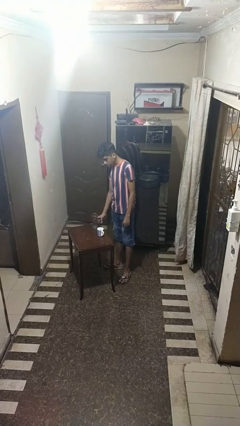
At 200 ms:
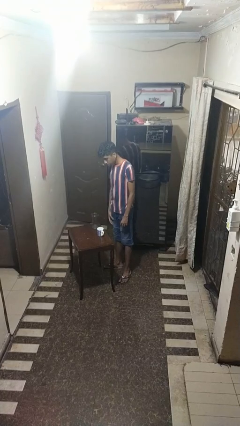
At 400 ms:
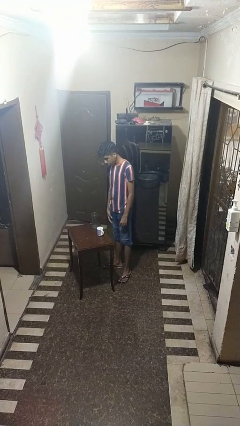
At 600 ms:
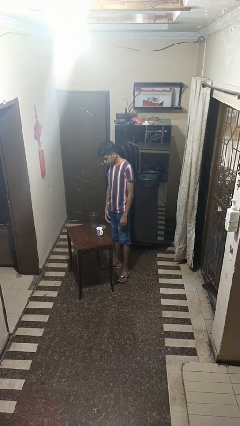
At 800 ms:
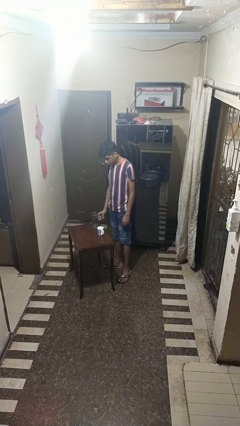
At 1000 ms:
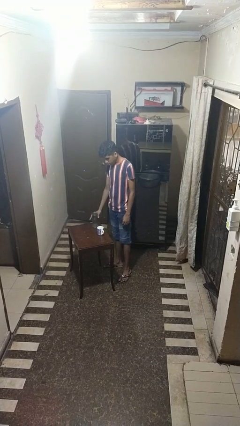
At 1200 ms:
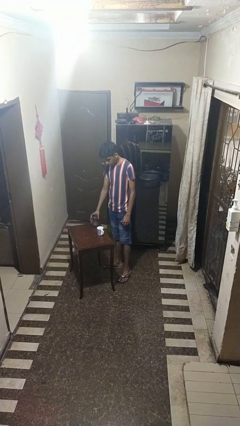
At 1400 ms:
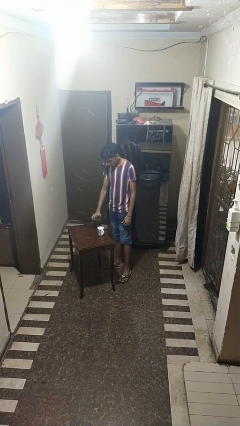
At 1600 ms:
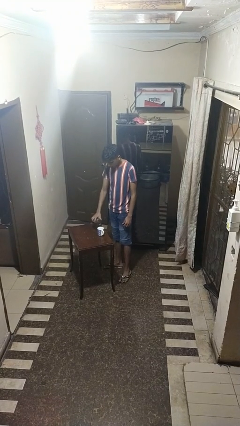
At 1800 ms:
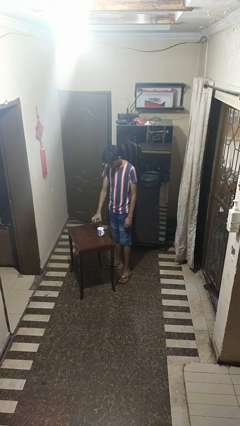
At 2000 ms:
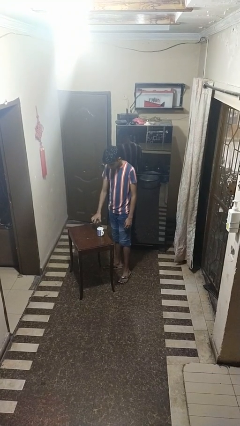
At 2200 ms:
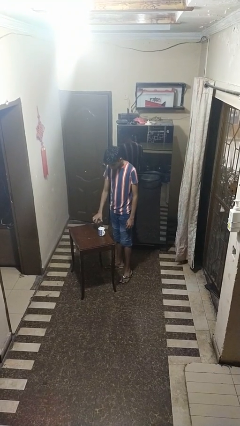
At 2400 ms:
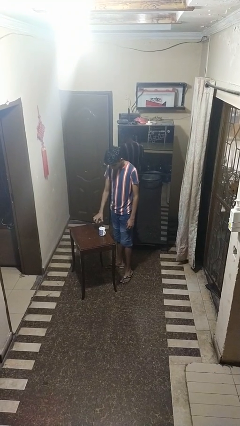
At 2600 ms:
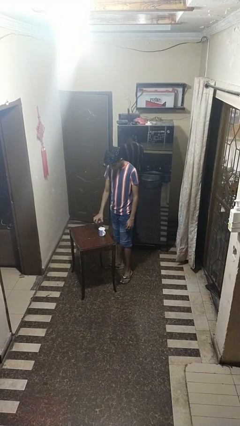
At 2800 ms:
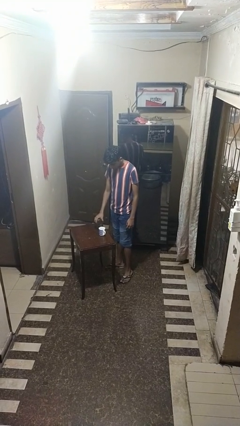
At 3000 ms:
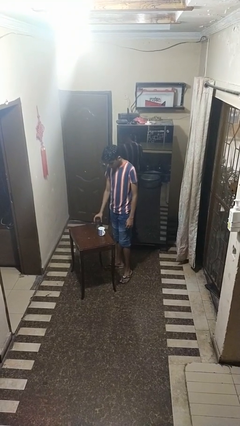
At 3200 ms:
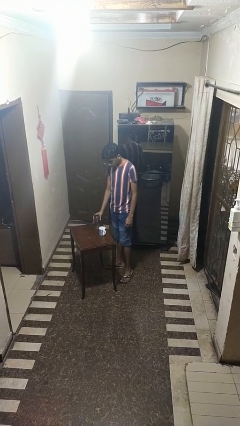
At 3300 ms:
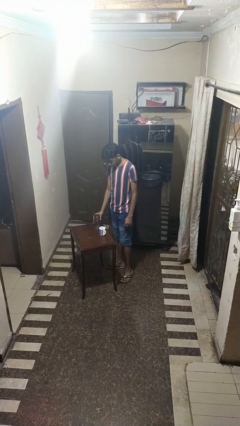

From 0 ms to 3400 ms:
person pours liquid into cup

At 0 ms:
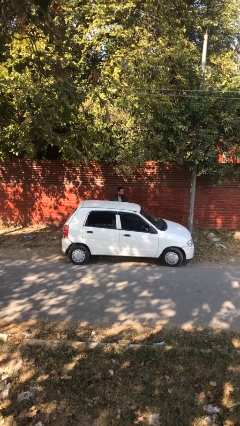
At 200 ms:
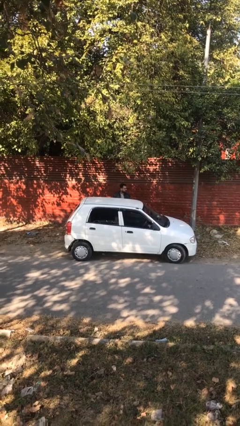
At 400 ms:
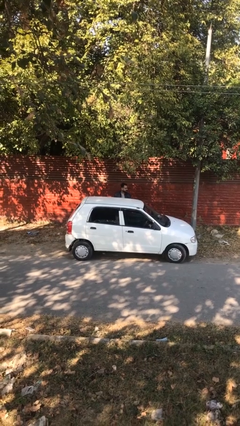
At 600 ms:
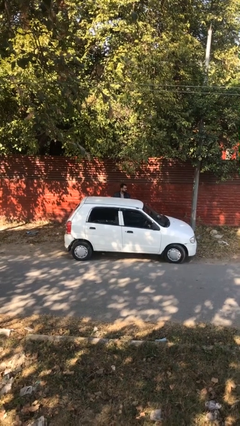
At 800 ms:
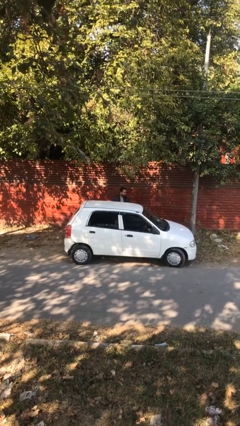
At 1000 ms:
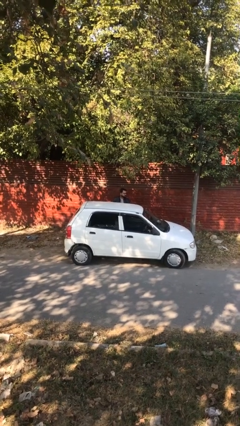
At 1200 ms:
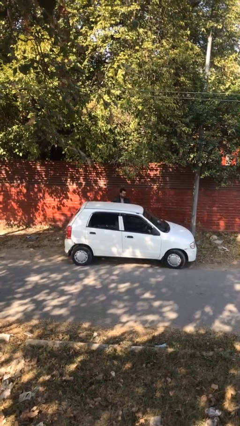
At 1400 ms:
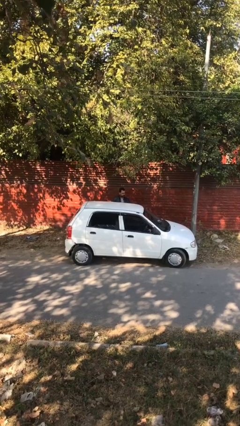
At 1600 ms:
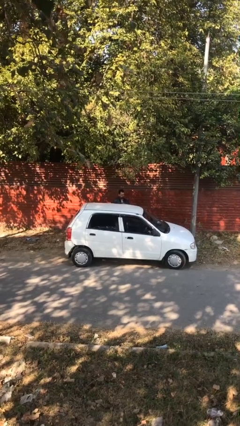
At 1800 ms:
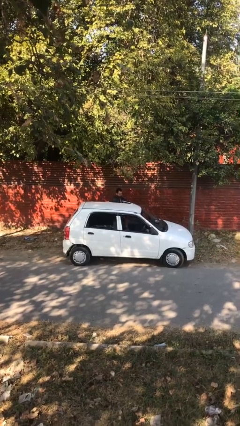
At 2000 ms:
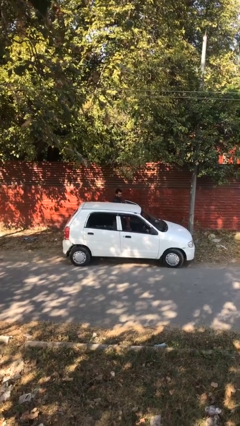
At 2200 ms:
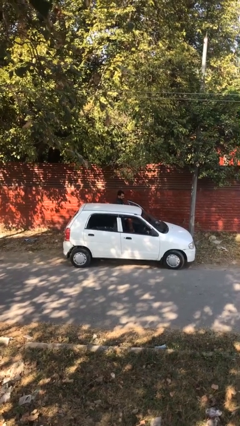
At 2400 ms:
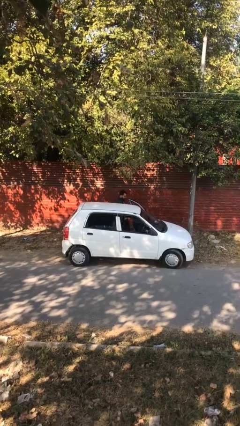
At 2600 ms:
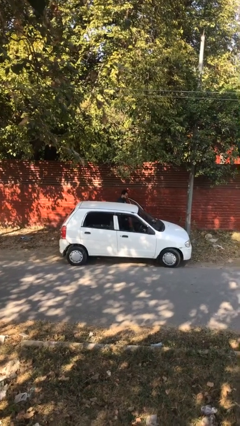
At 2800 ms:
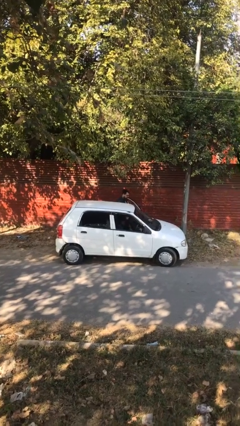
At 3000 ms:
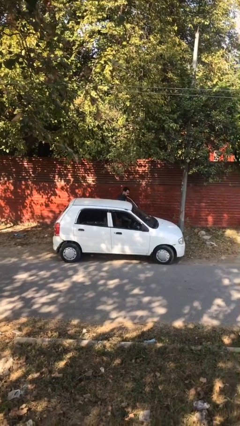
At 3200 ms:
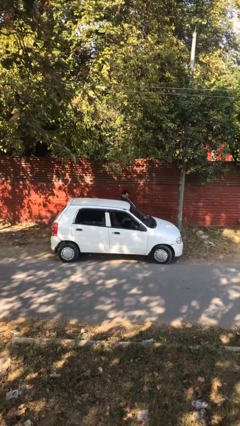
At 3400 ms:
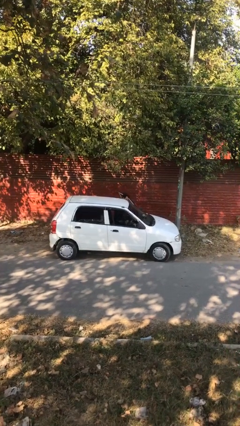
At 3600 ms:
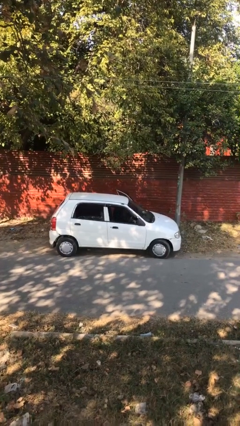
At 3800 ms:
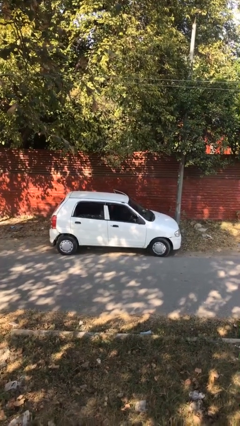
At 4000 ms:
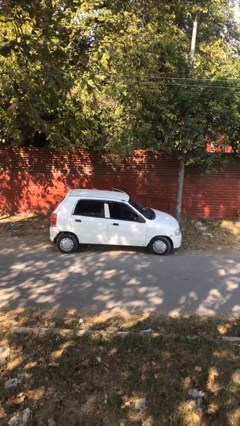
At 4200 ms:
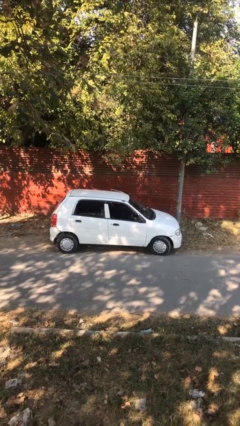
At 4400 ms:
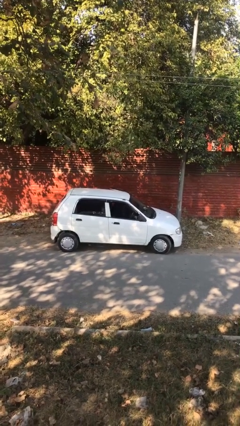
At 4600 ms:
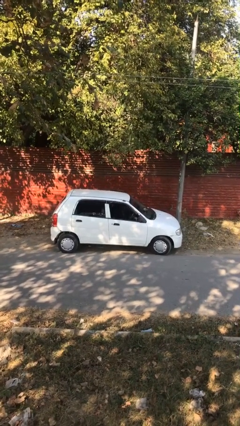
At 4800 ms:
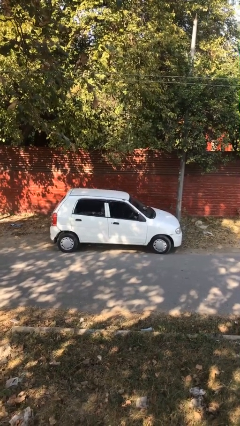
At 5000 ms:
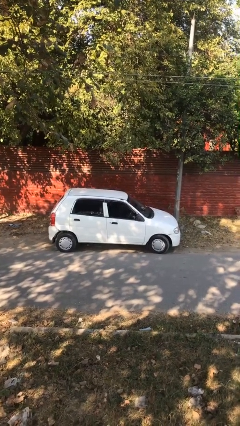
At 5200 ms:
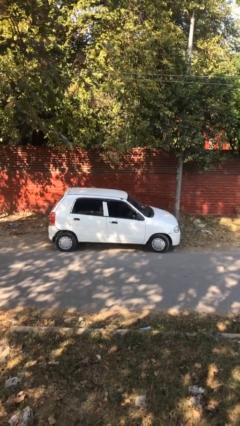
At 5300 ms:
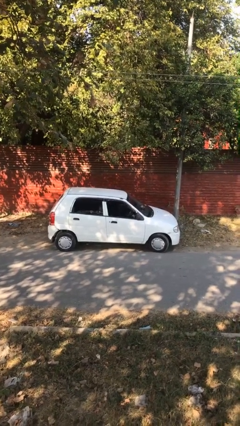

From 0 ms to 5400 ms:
person enters car

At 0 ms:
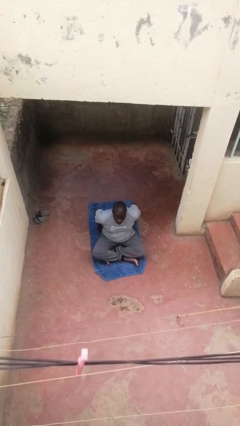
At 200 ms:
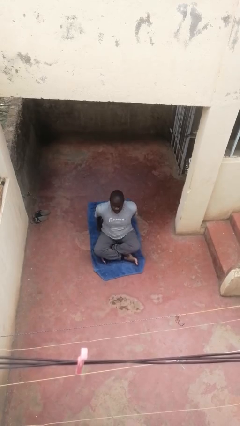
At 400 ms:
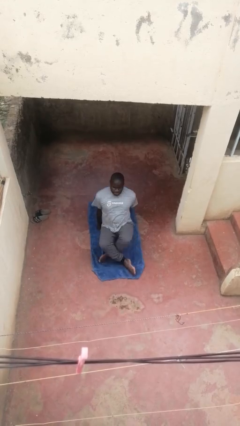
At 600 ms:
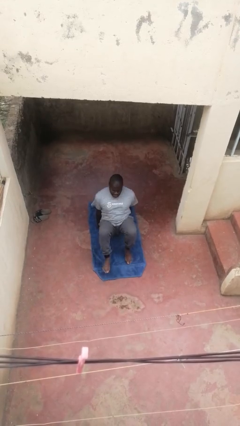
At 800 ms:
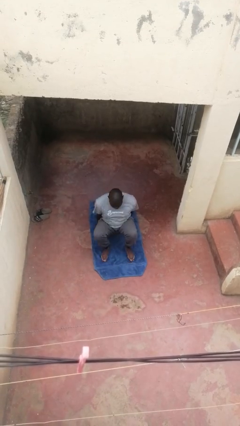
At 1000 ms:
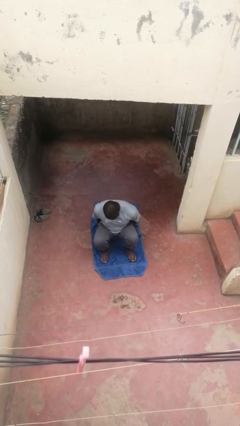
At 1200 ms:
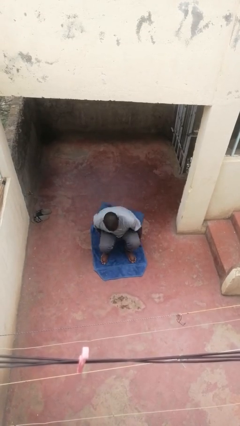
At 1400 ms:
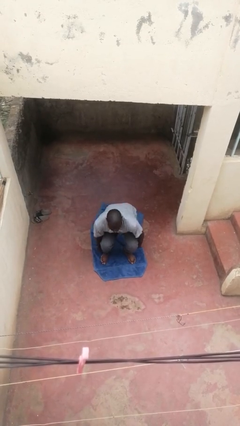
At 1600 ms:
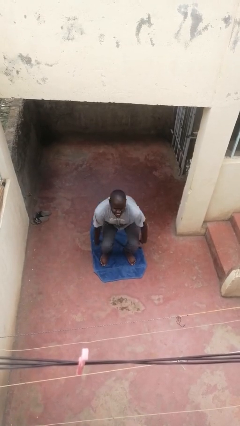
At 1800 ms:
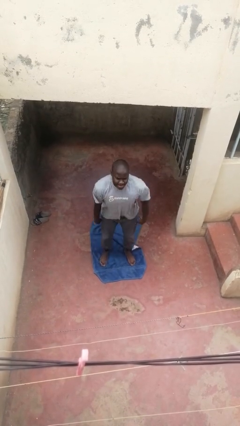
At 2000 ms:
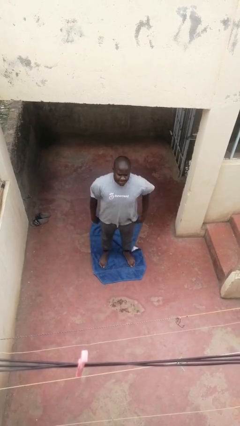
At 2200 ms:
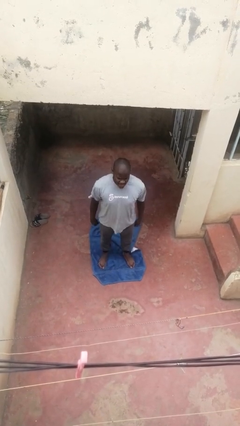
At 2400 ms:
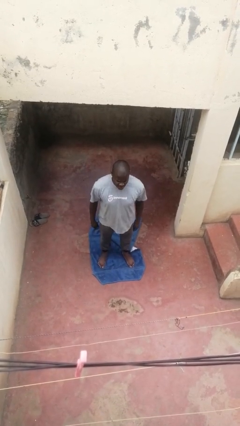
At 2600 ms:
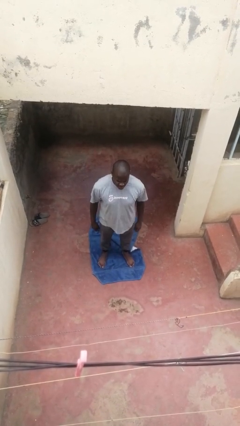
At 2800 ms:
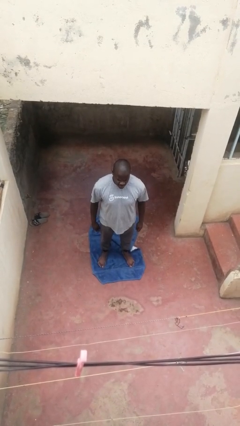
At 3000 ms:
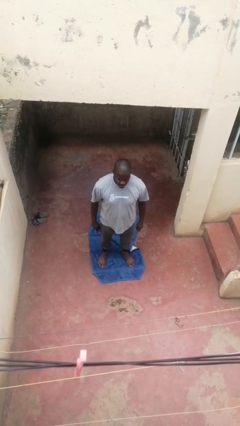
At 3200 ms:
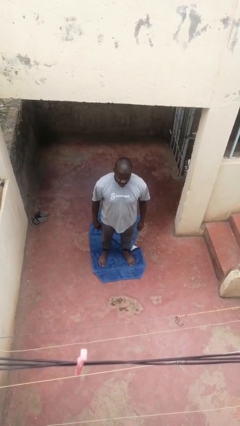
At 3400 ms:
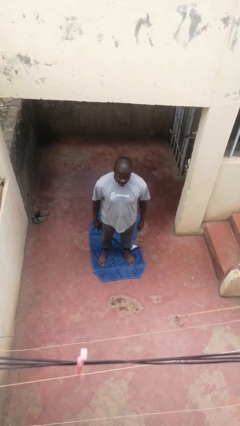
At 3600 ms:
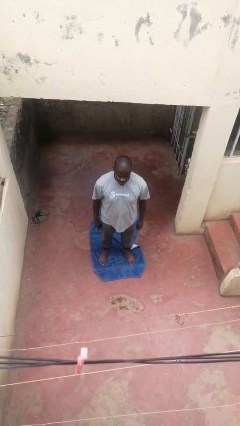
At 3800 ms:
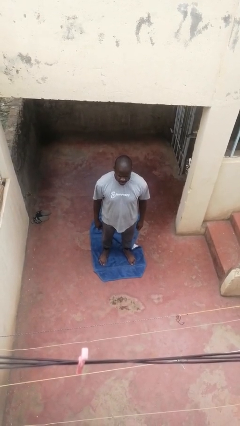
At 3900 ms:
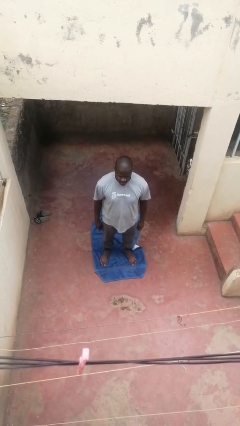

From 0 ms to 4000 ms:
person stands up from floor

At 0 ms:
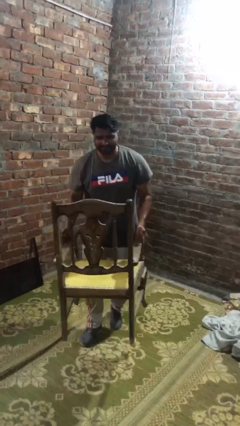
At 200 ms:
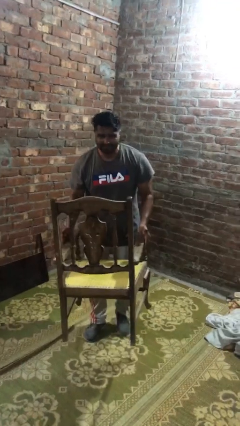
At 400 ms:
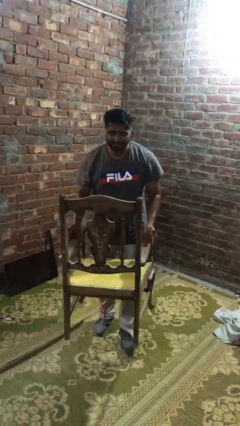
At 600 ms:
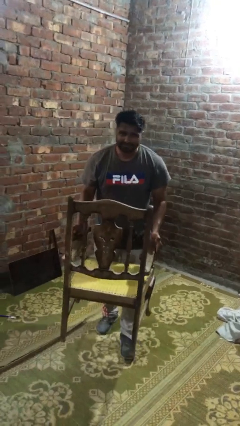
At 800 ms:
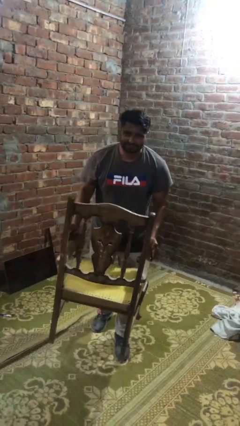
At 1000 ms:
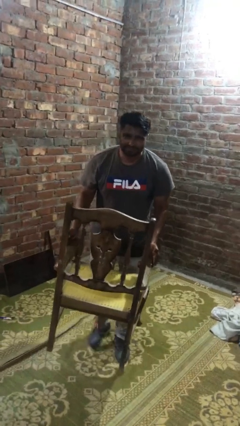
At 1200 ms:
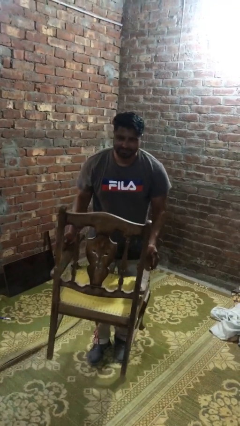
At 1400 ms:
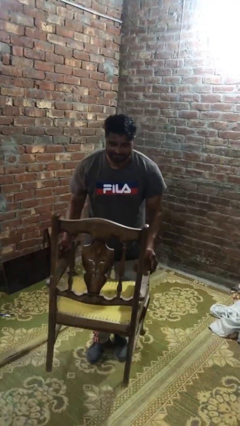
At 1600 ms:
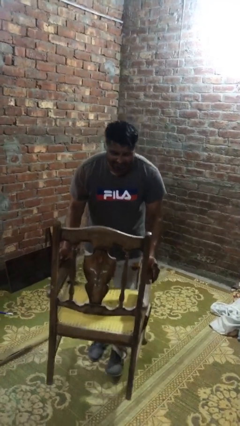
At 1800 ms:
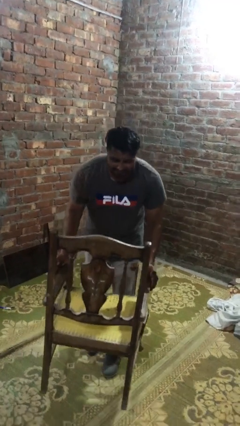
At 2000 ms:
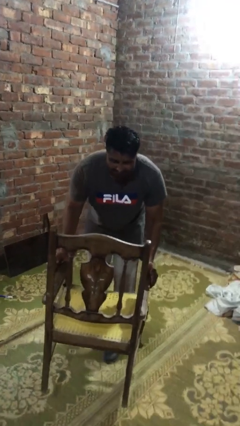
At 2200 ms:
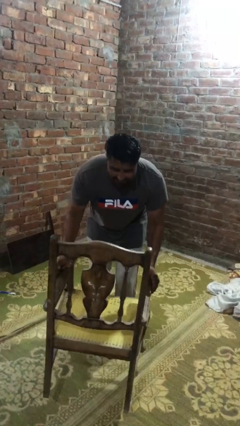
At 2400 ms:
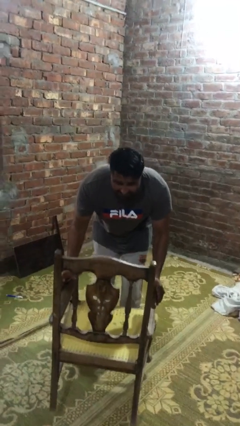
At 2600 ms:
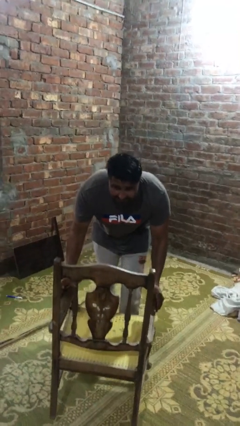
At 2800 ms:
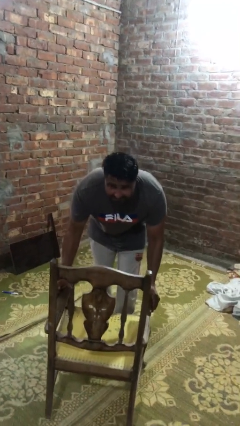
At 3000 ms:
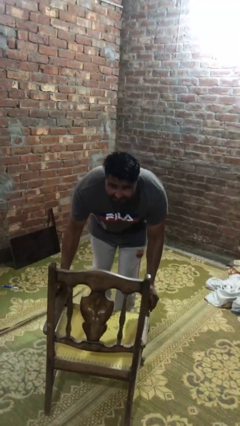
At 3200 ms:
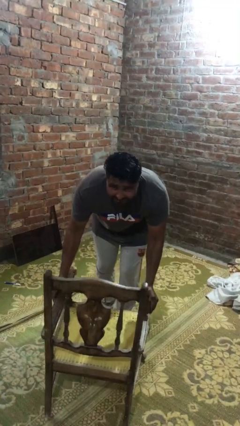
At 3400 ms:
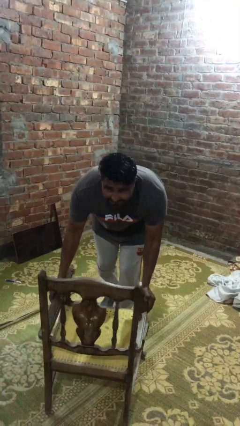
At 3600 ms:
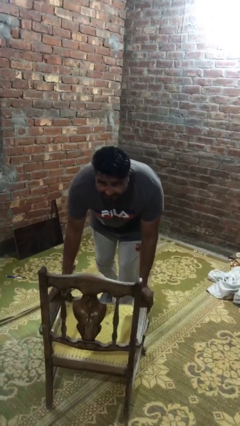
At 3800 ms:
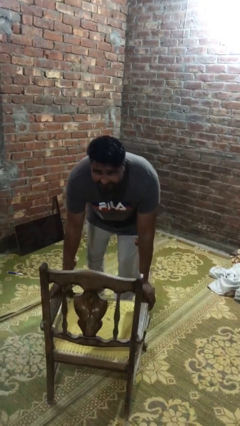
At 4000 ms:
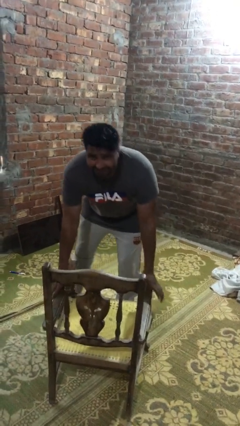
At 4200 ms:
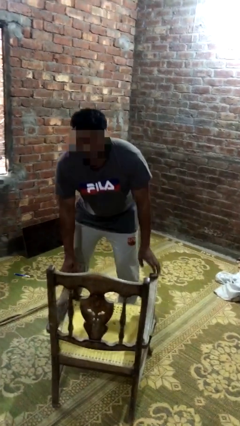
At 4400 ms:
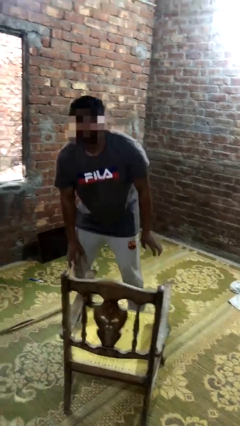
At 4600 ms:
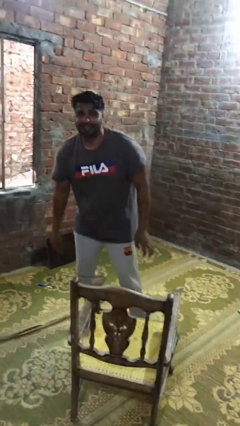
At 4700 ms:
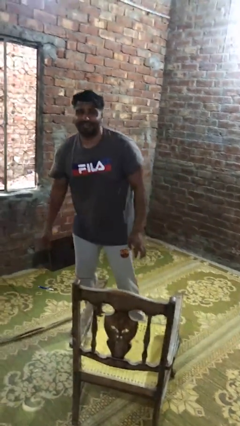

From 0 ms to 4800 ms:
person puts down object on floor
